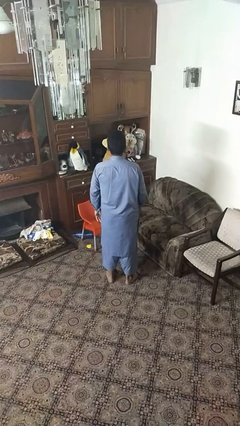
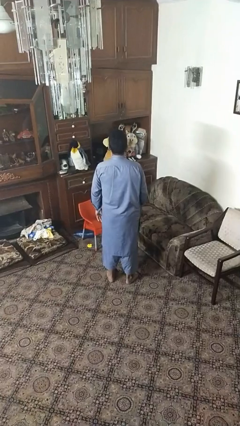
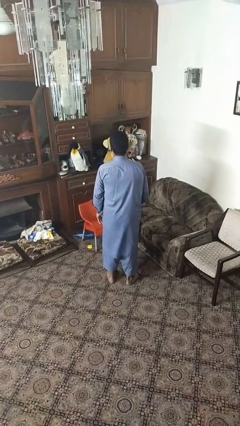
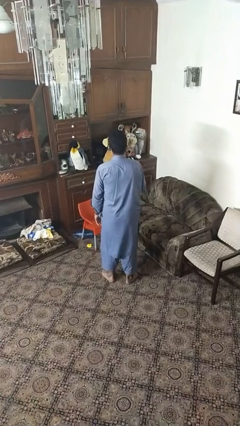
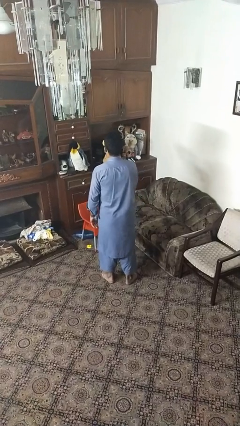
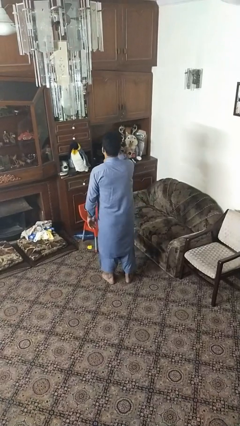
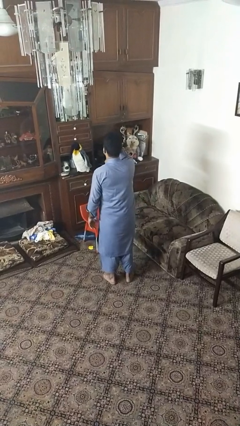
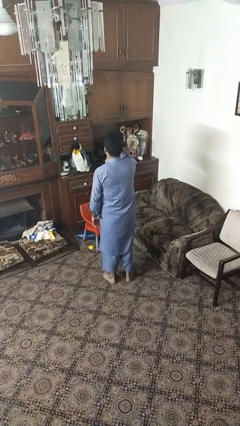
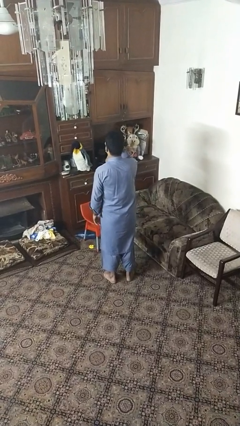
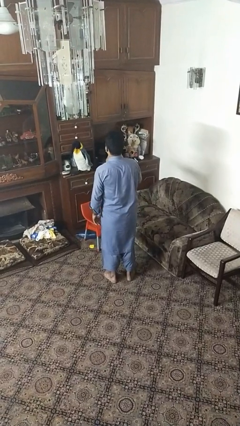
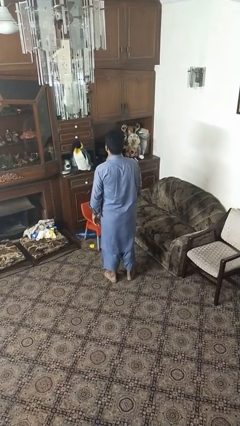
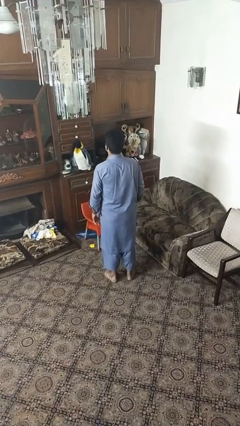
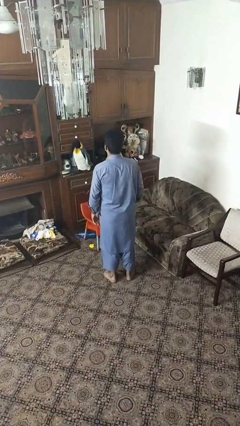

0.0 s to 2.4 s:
person salutes

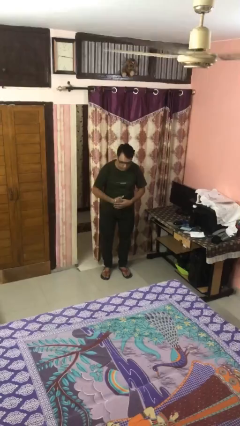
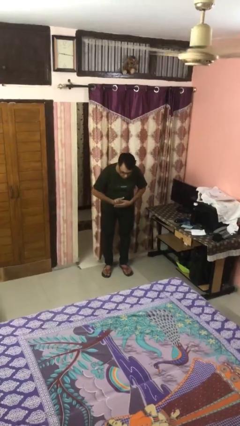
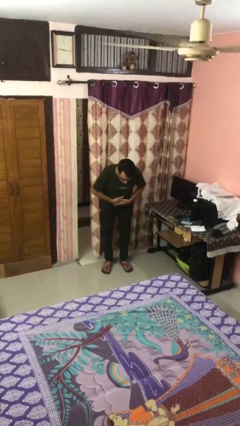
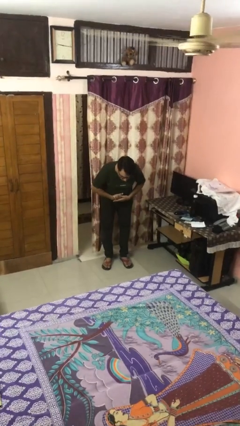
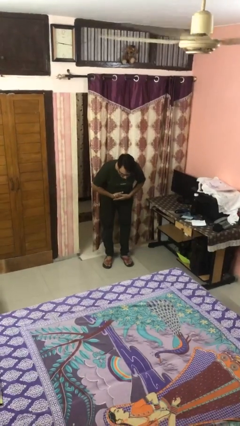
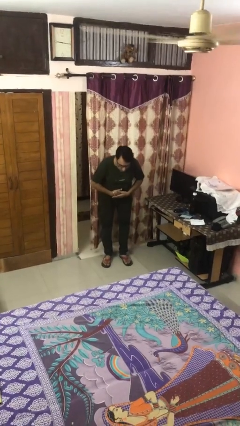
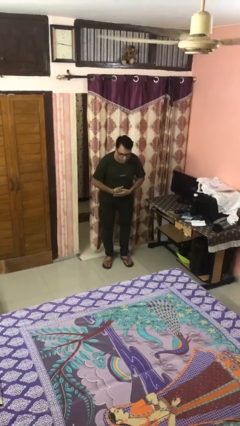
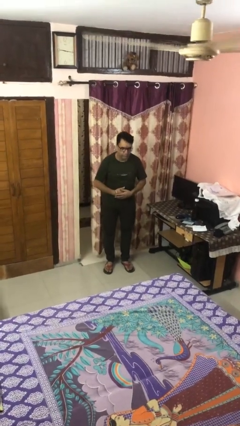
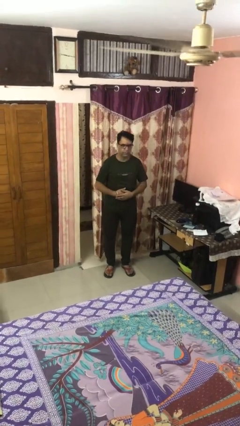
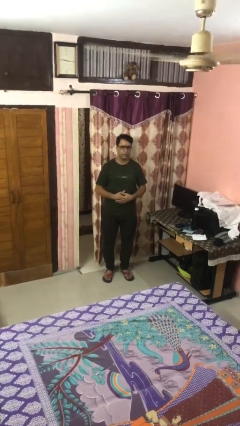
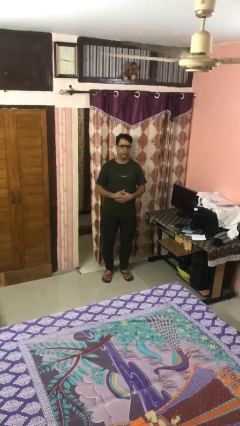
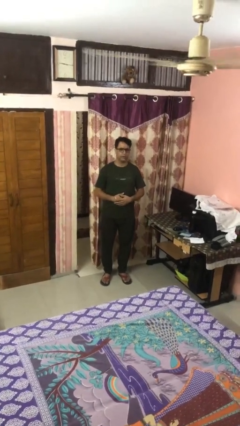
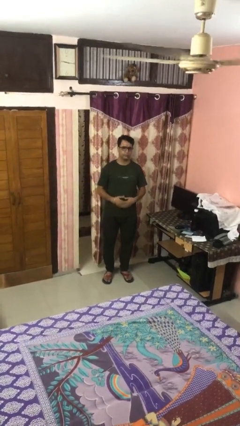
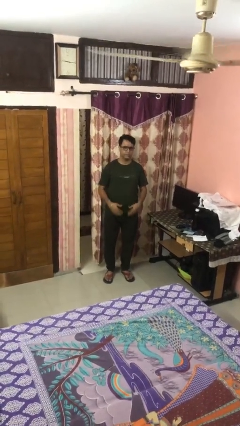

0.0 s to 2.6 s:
person bows

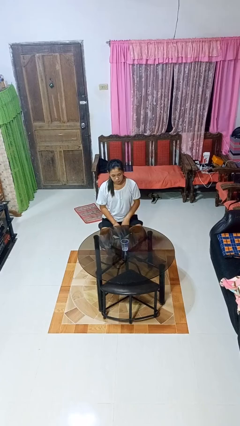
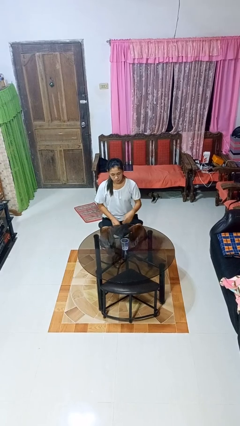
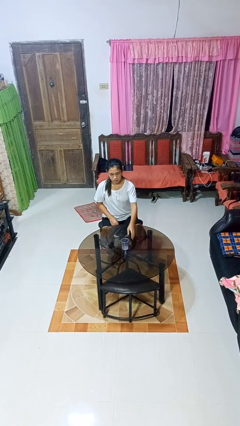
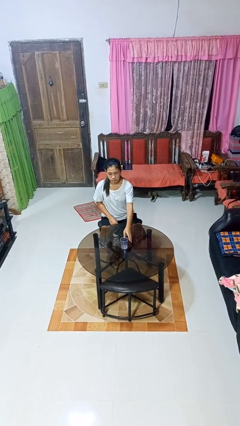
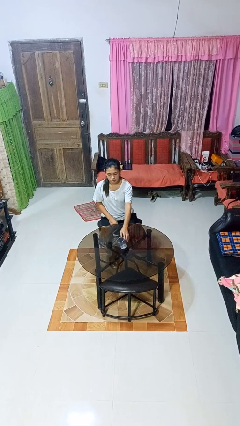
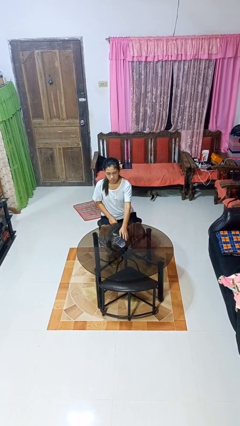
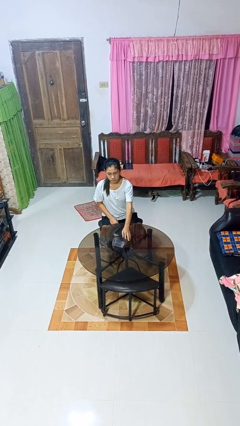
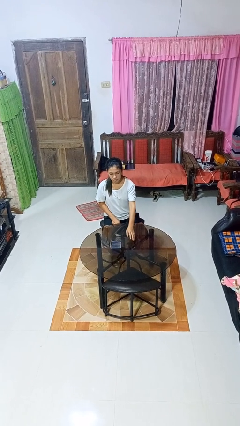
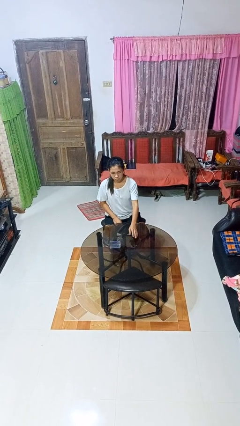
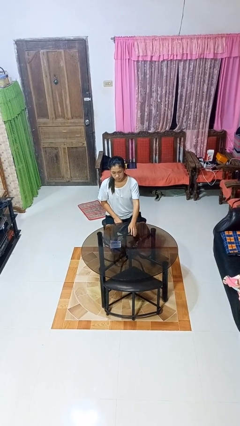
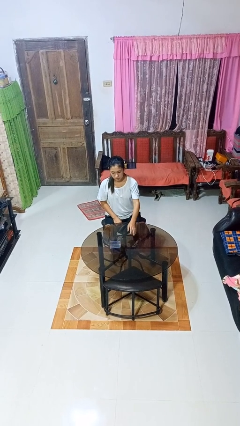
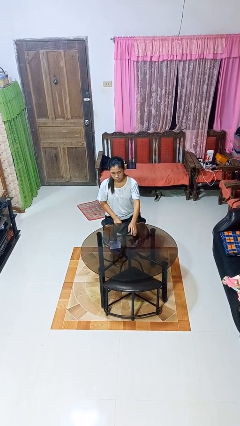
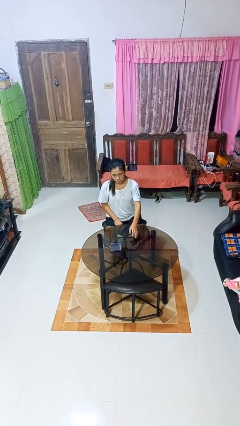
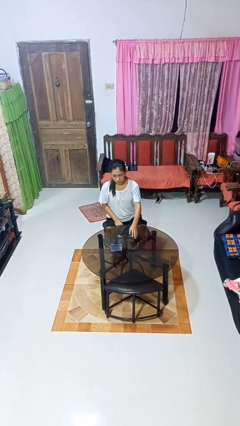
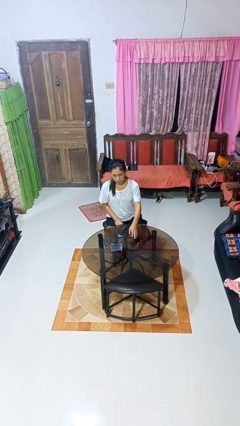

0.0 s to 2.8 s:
person knocks over glass

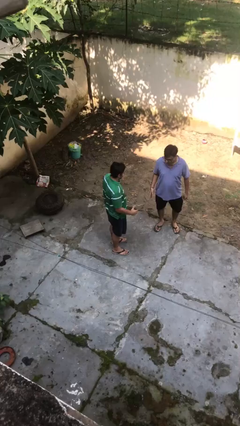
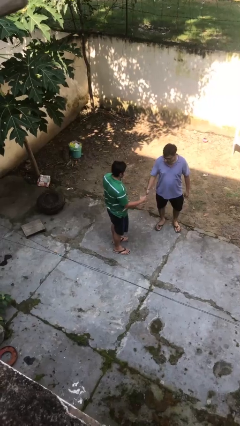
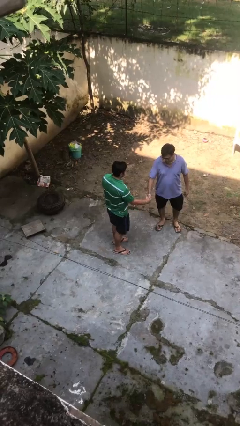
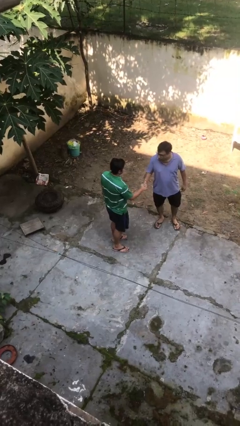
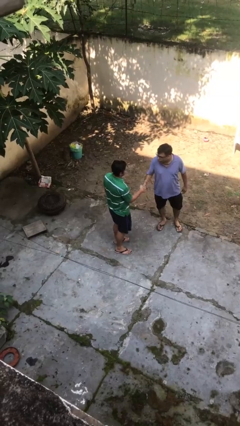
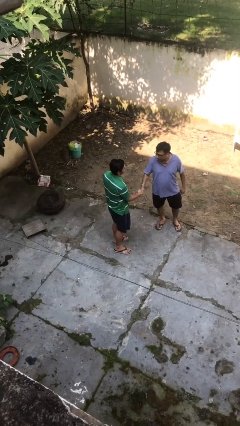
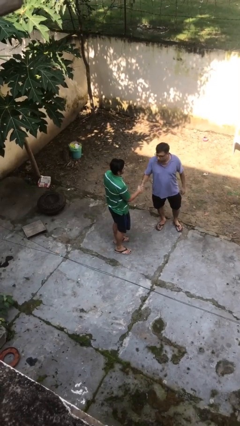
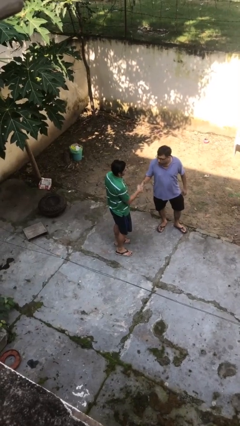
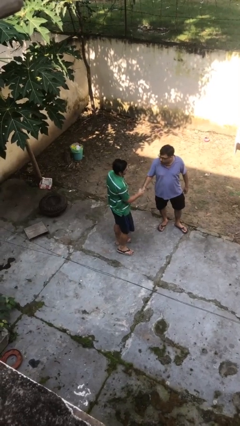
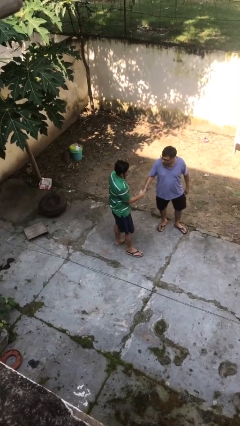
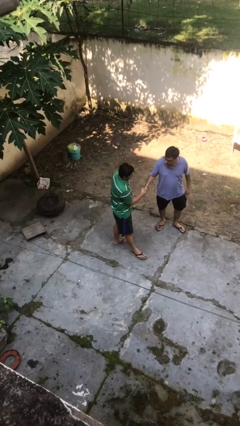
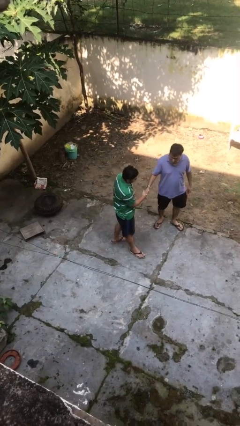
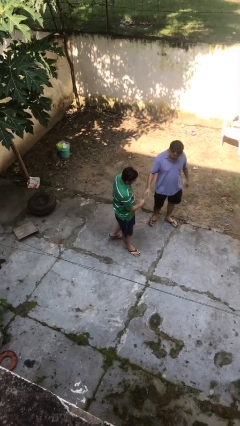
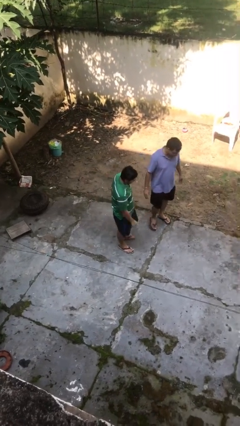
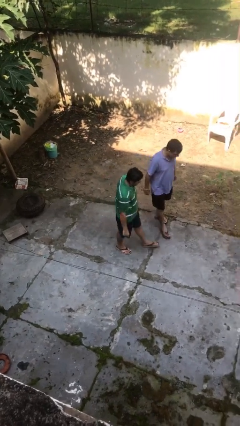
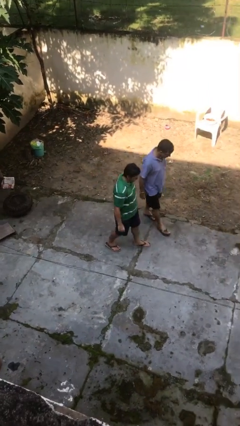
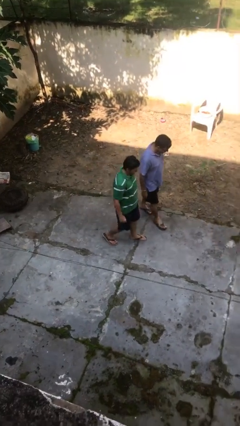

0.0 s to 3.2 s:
person shakes hand

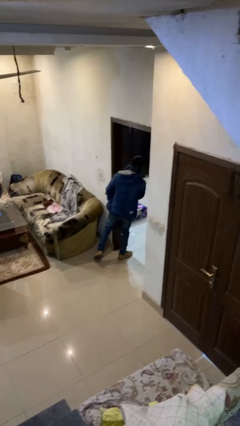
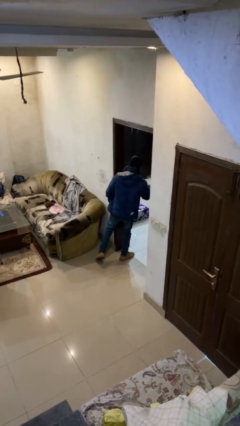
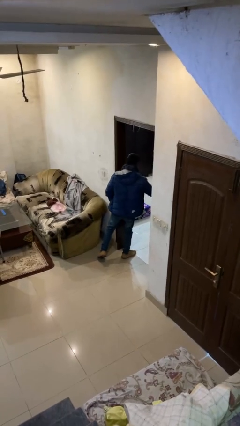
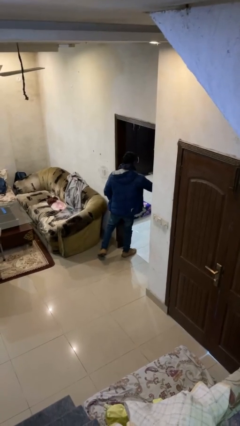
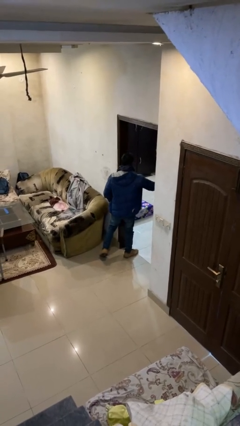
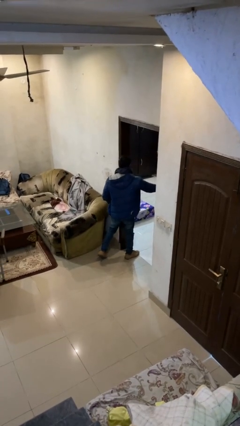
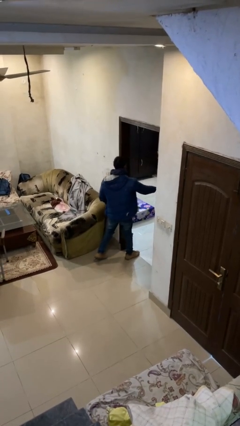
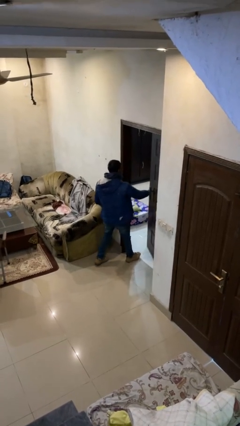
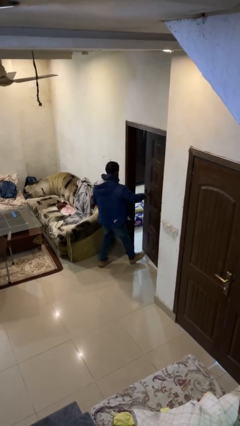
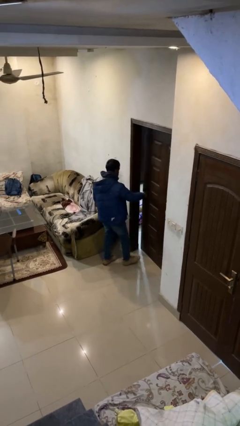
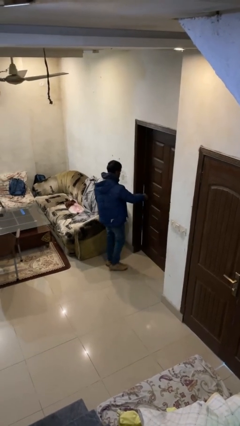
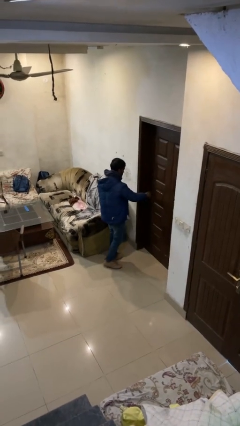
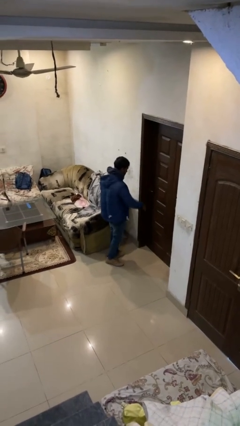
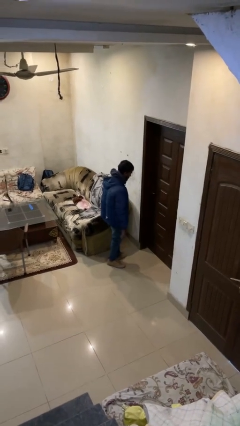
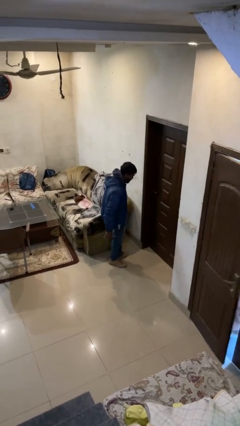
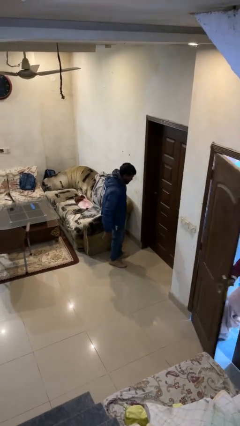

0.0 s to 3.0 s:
person closes facility door

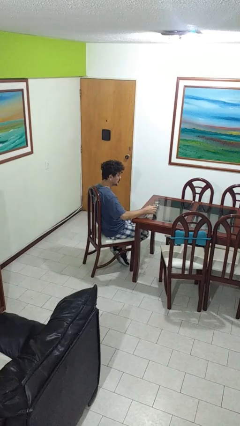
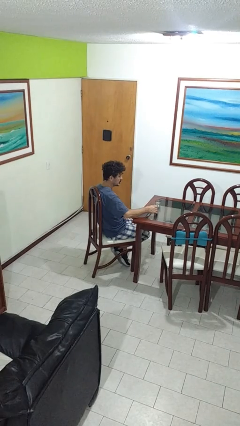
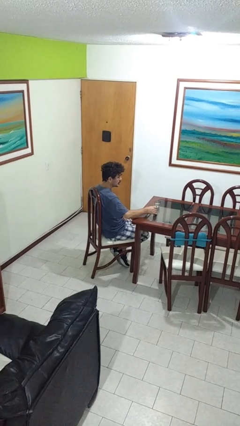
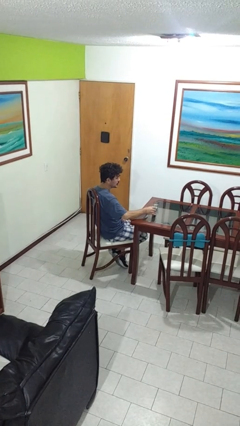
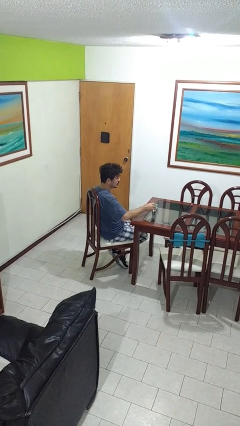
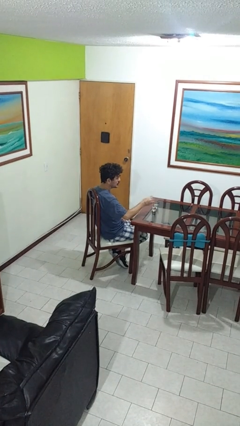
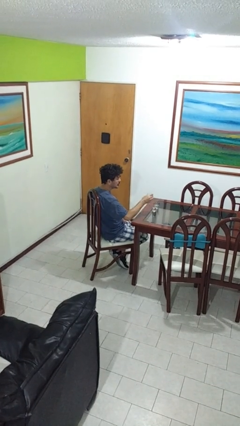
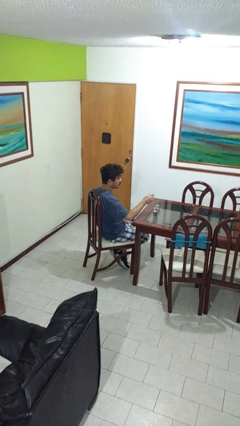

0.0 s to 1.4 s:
person picks up object from table

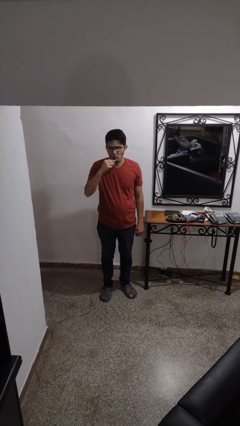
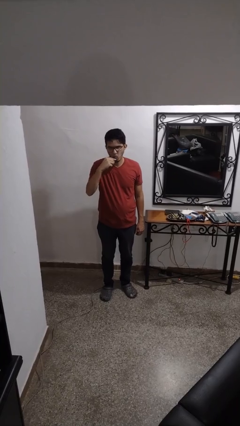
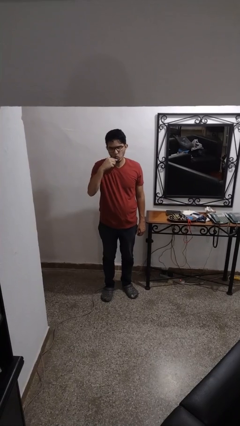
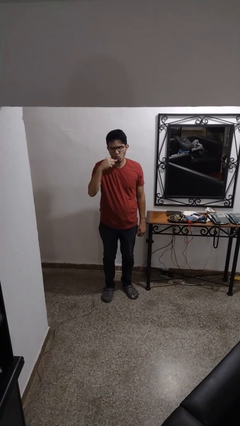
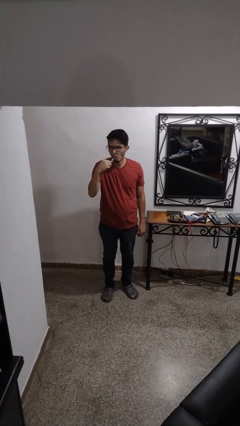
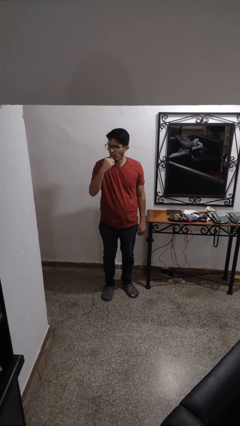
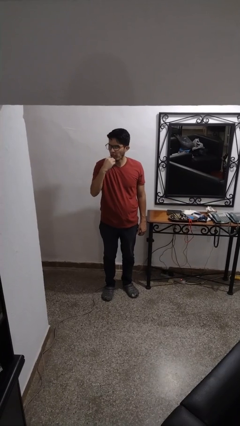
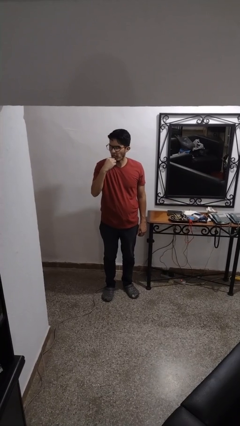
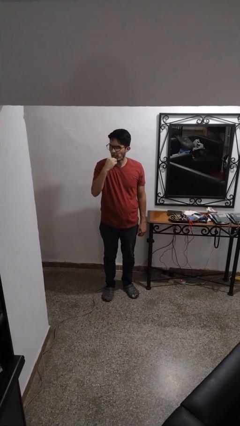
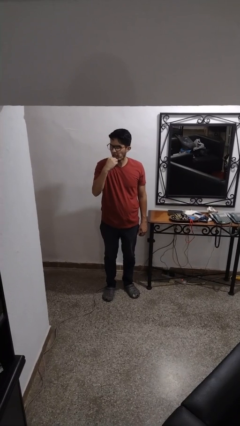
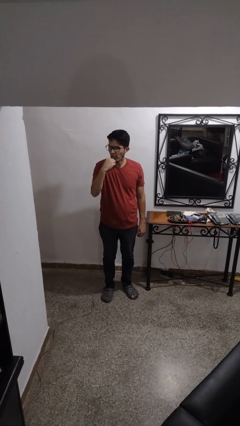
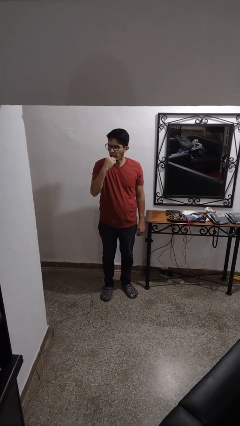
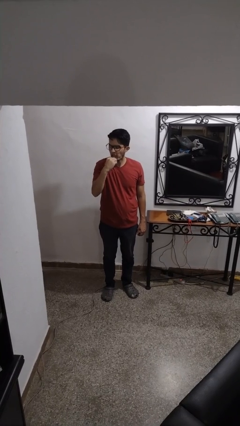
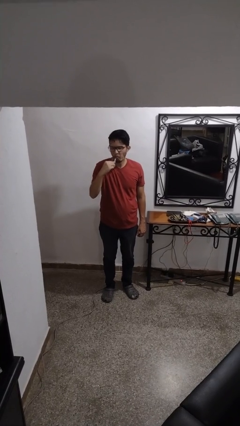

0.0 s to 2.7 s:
person brushes teeth
